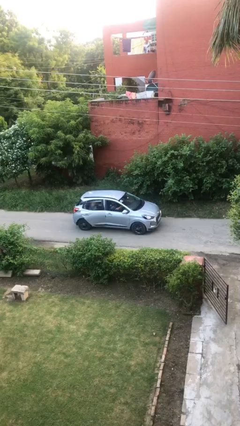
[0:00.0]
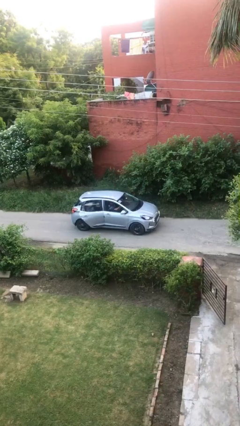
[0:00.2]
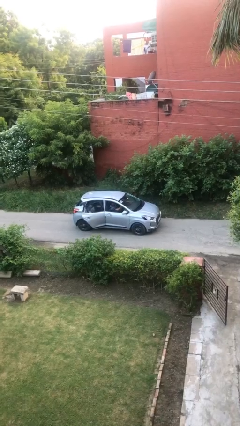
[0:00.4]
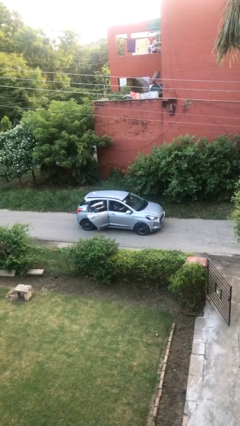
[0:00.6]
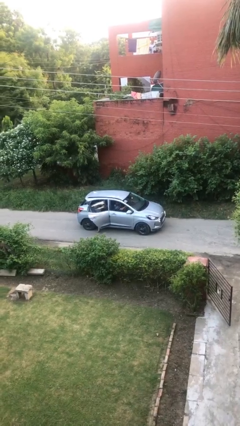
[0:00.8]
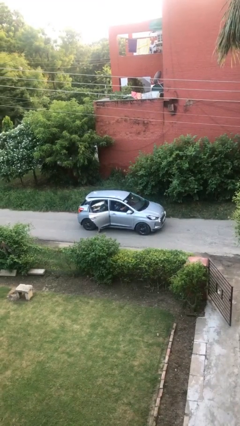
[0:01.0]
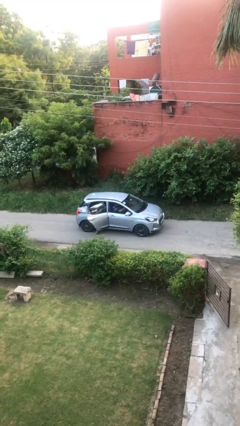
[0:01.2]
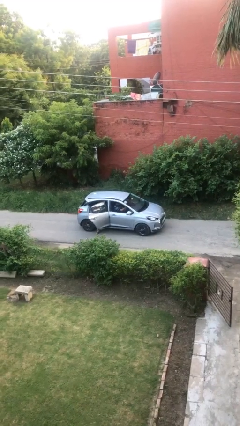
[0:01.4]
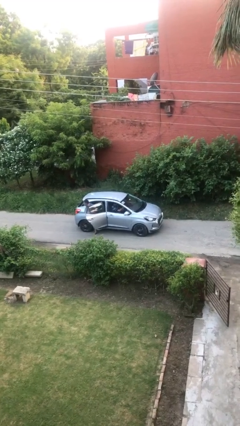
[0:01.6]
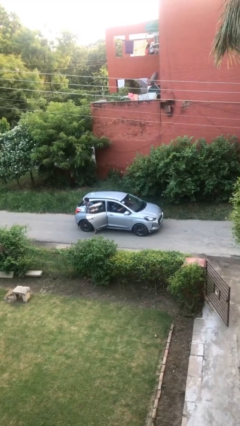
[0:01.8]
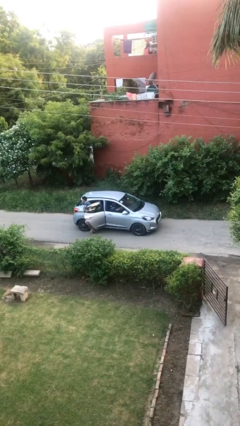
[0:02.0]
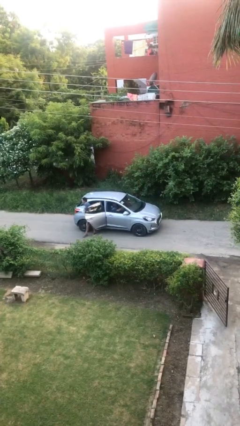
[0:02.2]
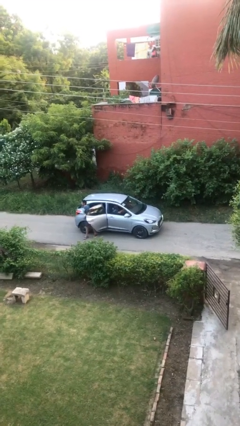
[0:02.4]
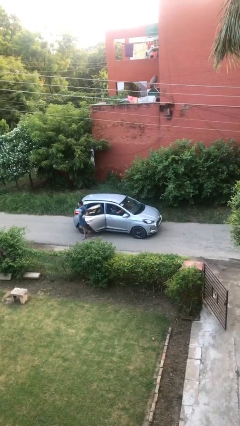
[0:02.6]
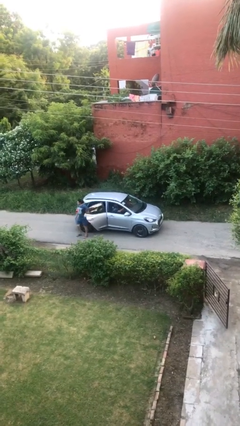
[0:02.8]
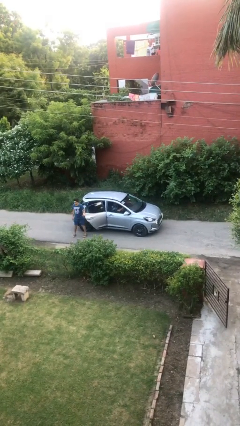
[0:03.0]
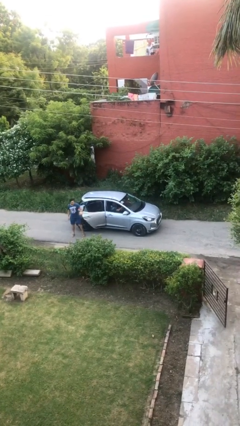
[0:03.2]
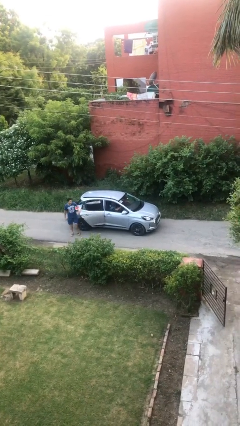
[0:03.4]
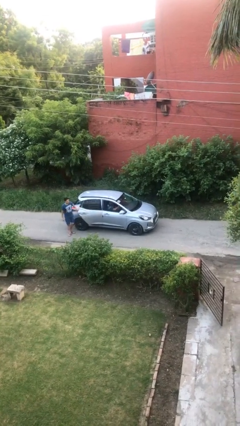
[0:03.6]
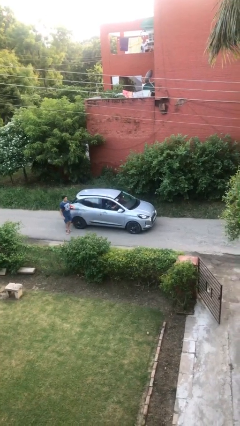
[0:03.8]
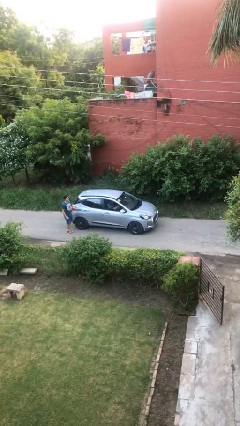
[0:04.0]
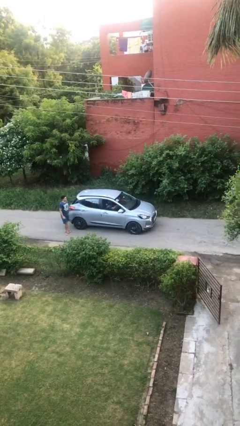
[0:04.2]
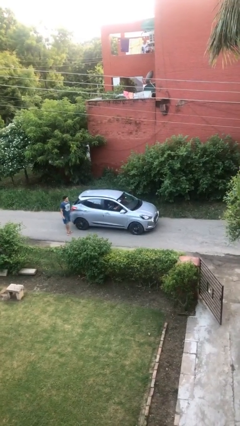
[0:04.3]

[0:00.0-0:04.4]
car drops off person

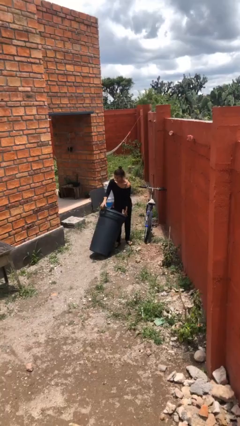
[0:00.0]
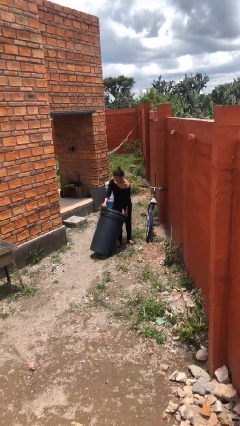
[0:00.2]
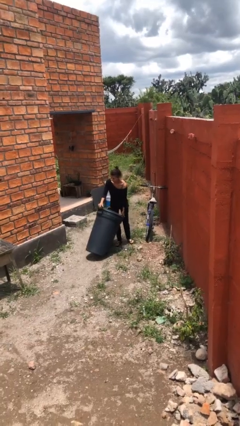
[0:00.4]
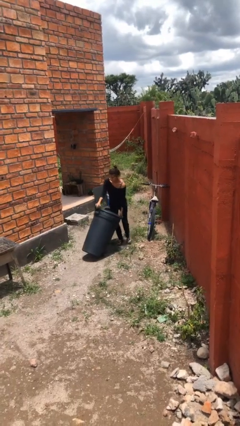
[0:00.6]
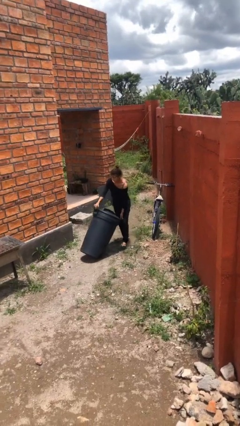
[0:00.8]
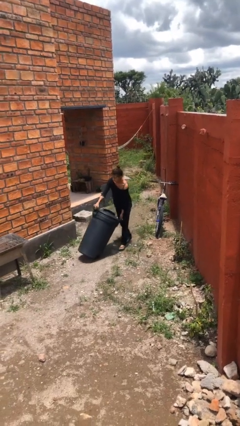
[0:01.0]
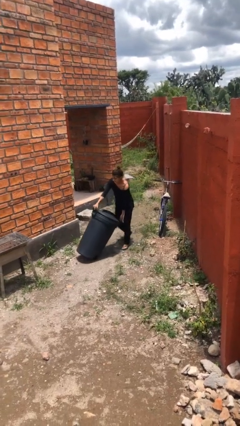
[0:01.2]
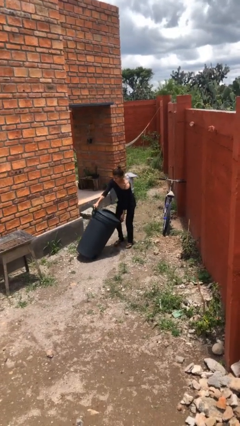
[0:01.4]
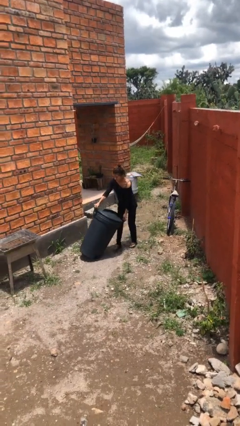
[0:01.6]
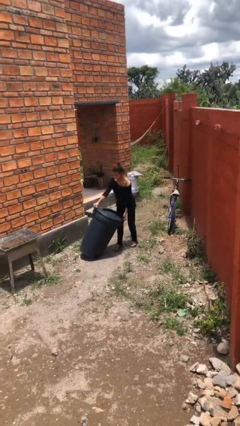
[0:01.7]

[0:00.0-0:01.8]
person pushes wheeled trashcan

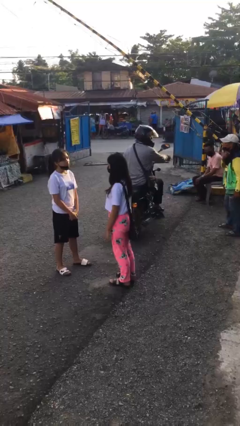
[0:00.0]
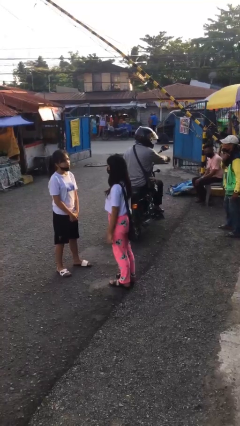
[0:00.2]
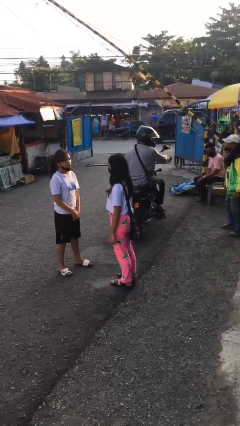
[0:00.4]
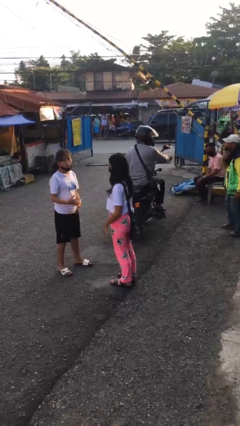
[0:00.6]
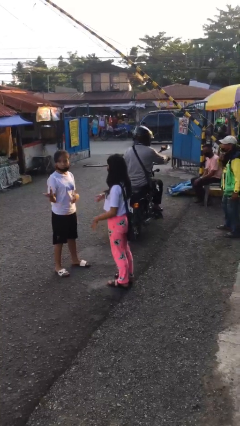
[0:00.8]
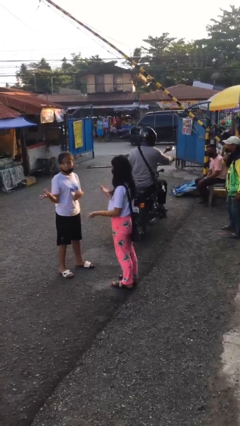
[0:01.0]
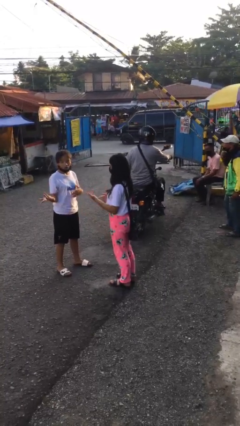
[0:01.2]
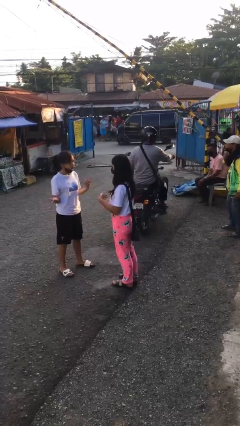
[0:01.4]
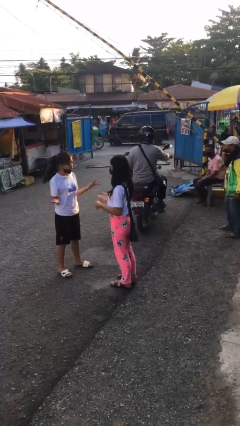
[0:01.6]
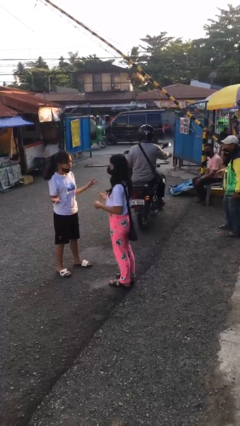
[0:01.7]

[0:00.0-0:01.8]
person talks to person

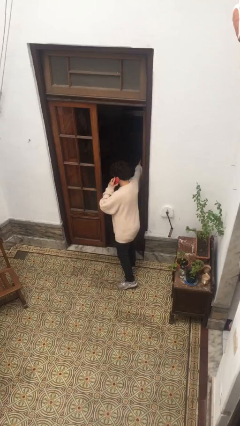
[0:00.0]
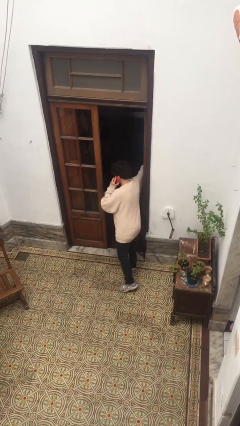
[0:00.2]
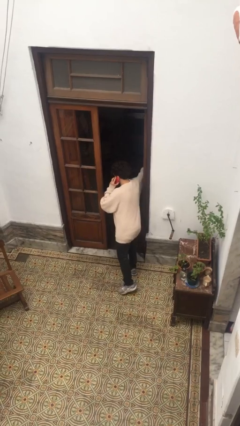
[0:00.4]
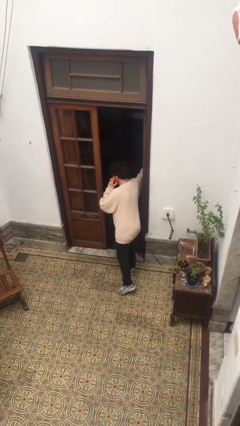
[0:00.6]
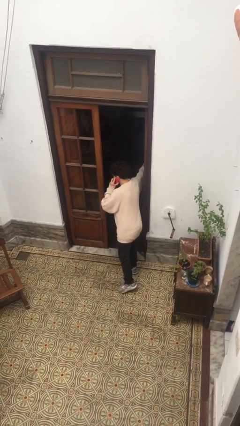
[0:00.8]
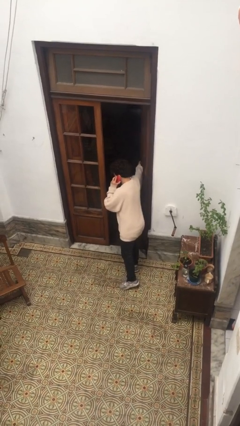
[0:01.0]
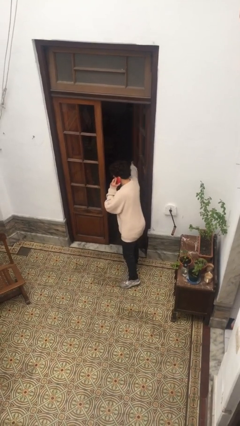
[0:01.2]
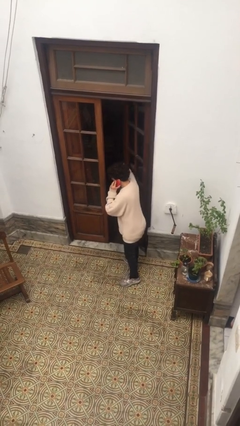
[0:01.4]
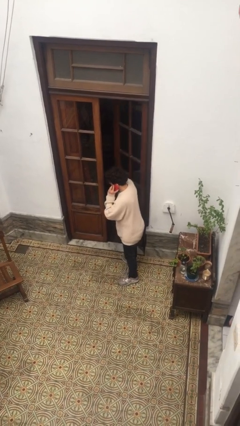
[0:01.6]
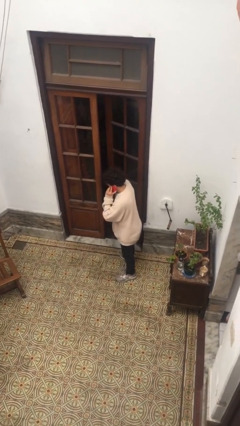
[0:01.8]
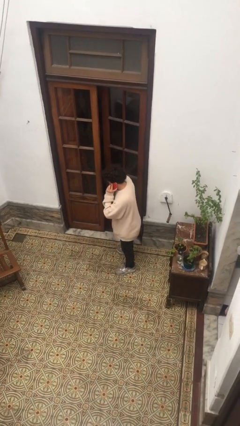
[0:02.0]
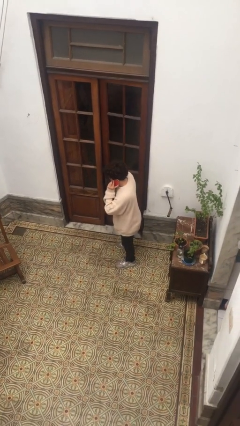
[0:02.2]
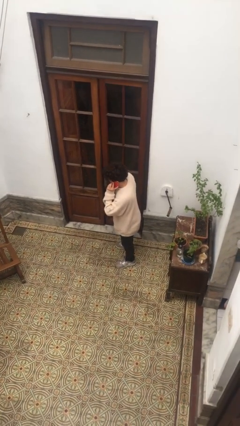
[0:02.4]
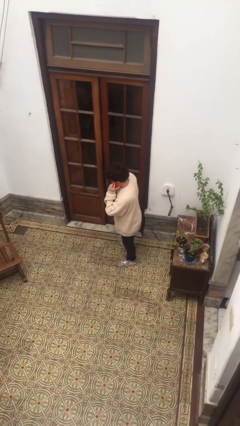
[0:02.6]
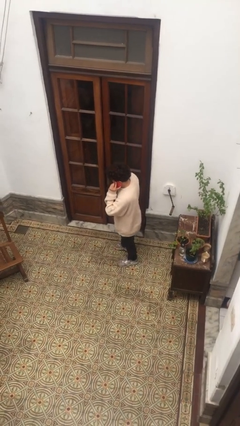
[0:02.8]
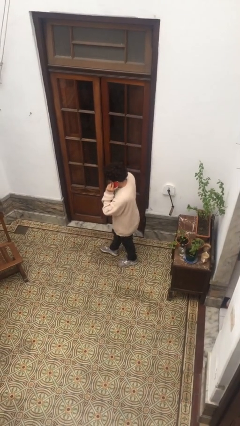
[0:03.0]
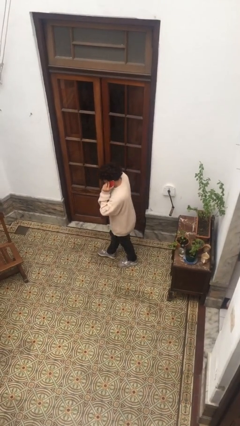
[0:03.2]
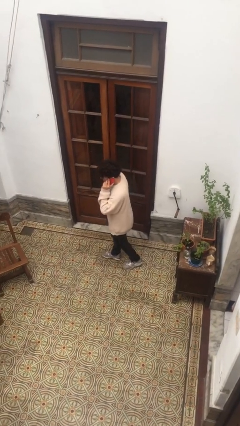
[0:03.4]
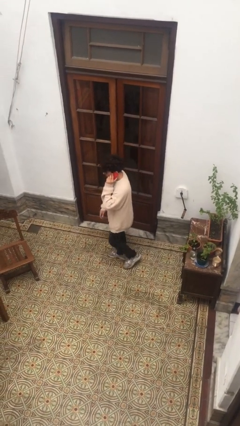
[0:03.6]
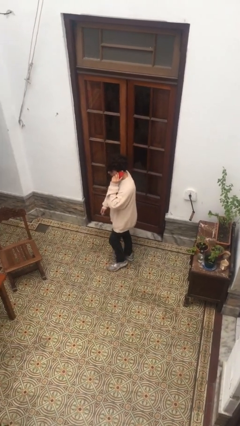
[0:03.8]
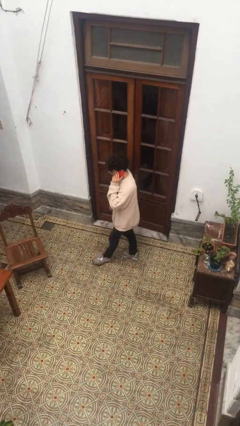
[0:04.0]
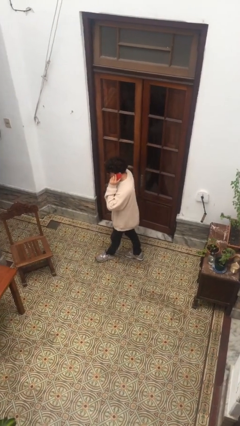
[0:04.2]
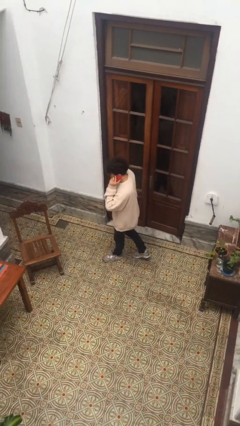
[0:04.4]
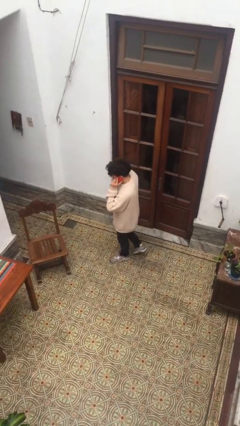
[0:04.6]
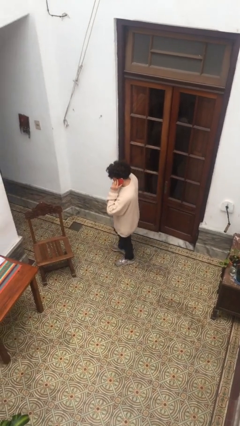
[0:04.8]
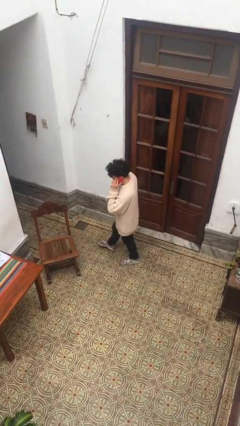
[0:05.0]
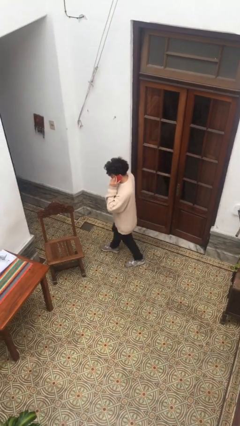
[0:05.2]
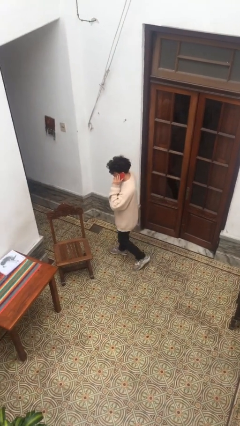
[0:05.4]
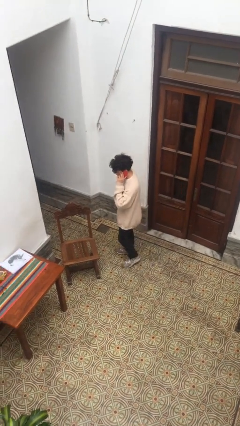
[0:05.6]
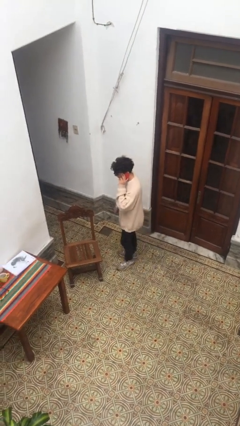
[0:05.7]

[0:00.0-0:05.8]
person closes facility door

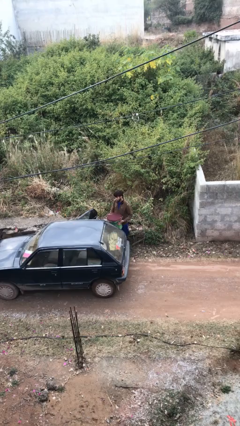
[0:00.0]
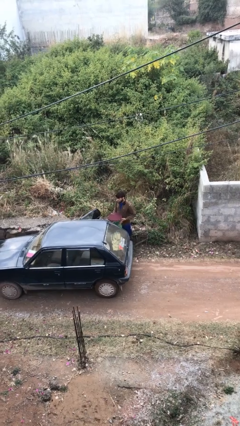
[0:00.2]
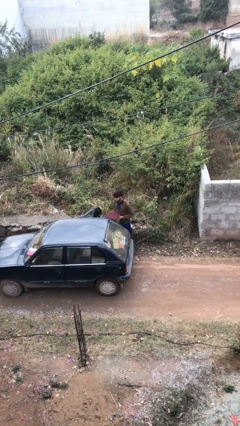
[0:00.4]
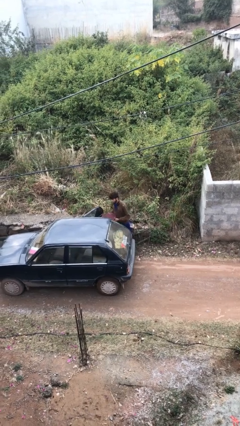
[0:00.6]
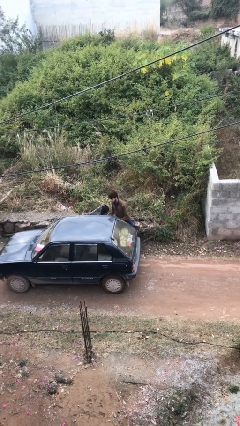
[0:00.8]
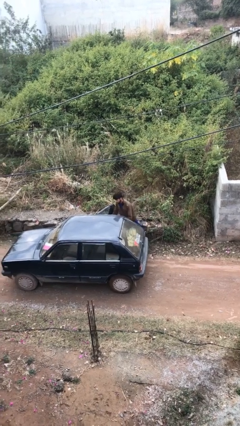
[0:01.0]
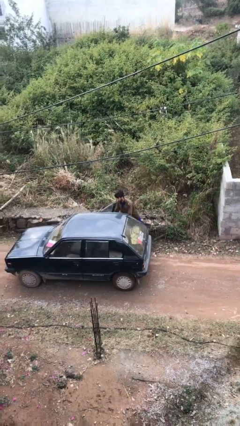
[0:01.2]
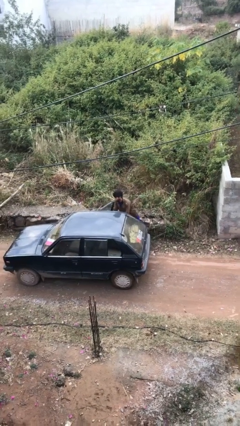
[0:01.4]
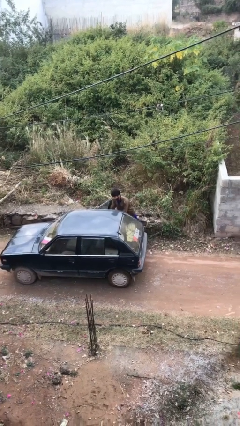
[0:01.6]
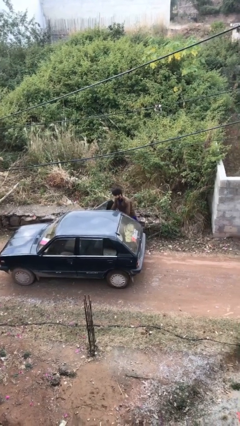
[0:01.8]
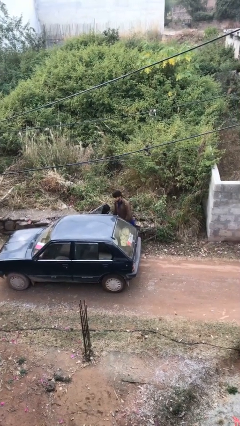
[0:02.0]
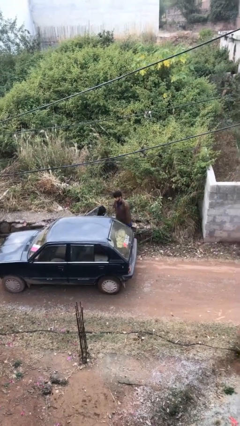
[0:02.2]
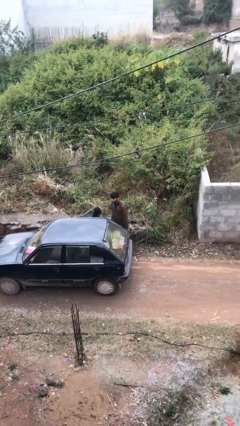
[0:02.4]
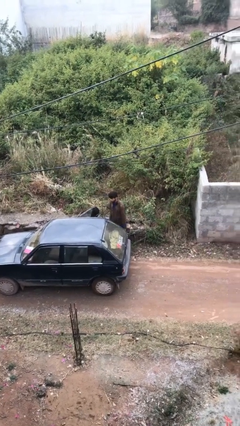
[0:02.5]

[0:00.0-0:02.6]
person loads car

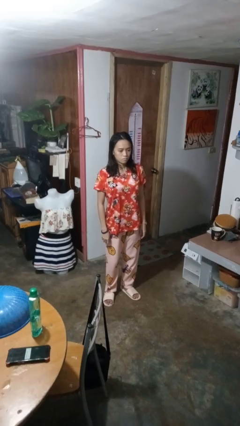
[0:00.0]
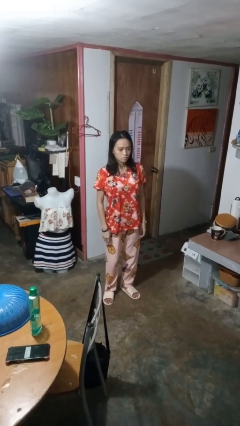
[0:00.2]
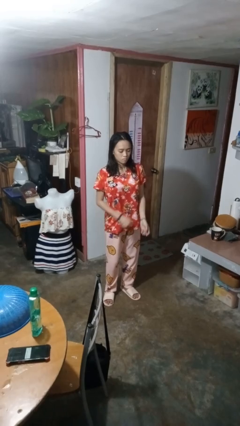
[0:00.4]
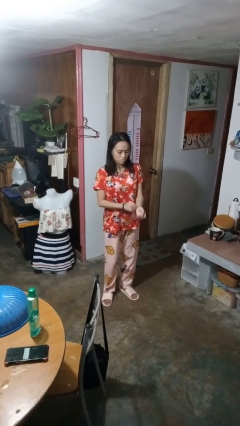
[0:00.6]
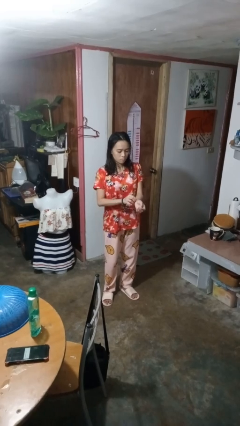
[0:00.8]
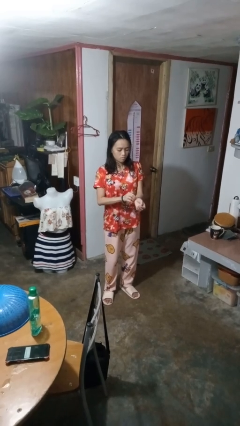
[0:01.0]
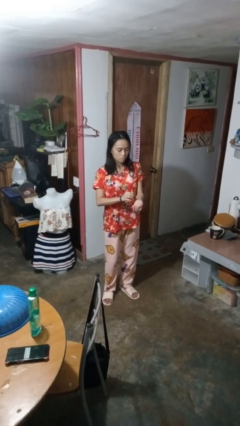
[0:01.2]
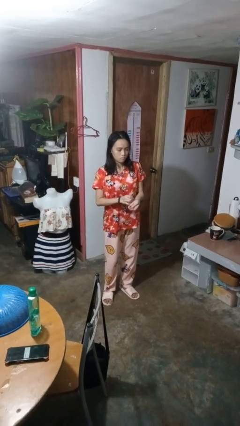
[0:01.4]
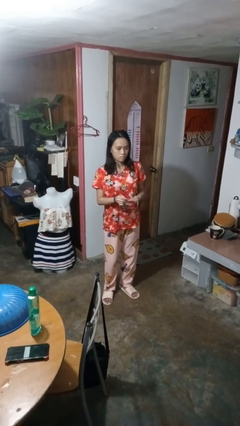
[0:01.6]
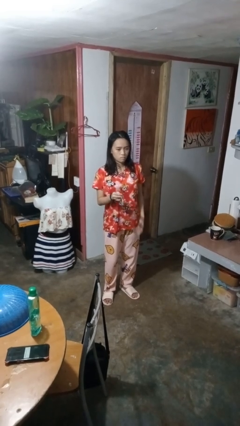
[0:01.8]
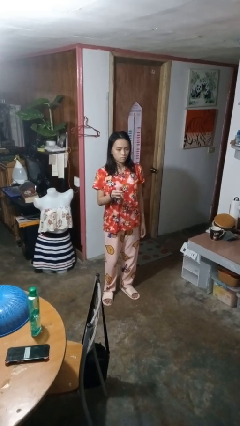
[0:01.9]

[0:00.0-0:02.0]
person takes off wristwatch
